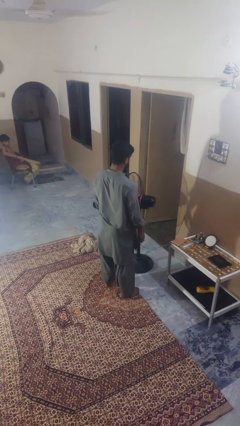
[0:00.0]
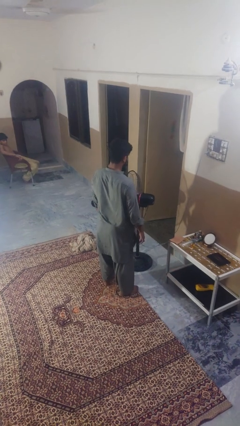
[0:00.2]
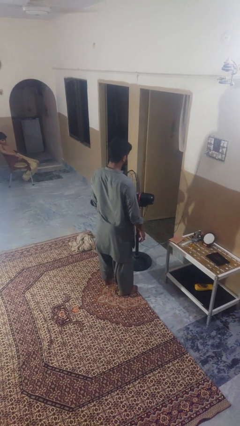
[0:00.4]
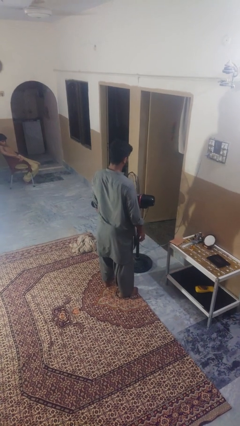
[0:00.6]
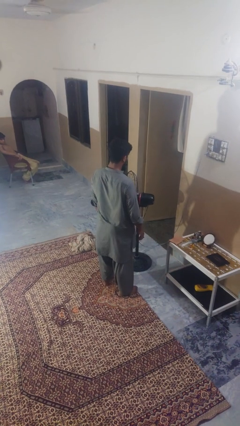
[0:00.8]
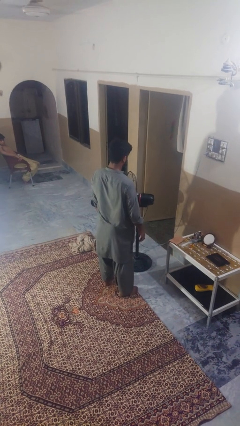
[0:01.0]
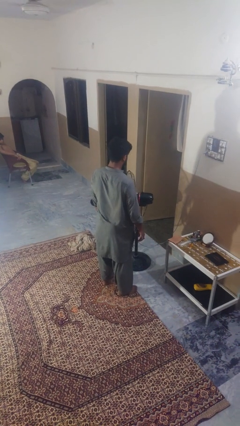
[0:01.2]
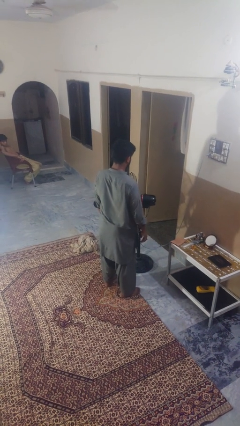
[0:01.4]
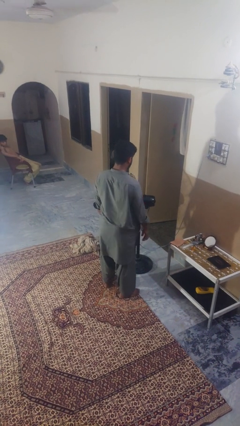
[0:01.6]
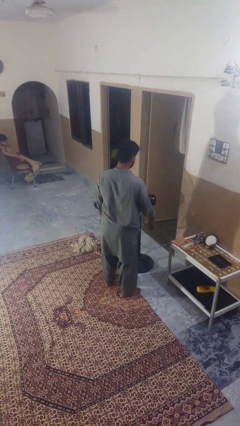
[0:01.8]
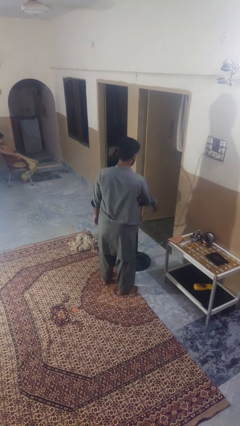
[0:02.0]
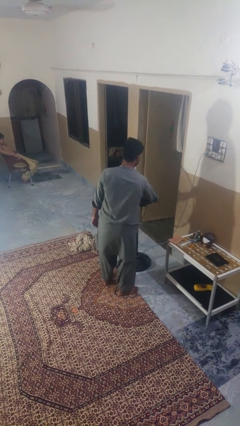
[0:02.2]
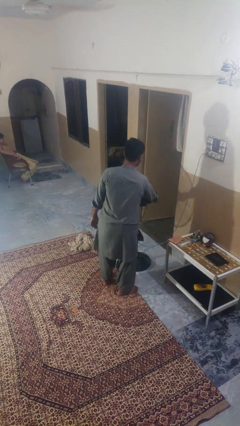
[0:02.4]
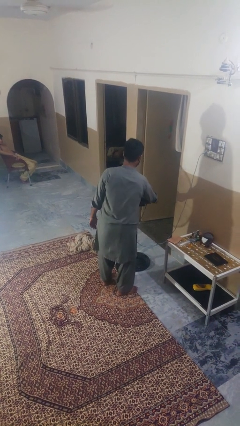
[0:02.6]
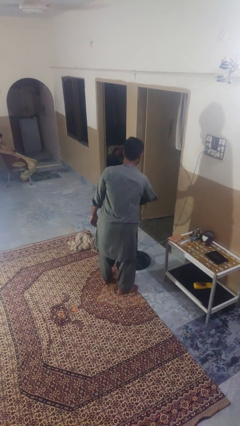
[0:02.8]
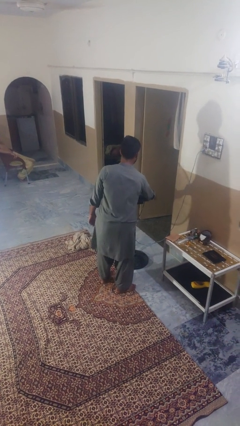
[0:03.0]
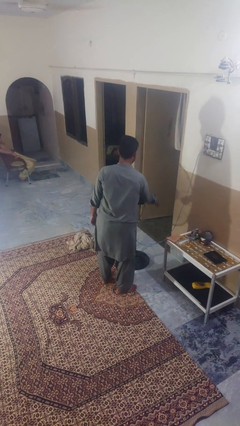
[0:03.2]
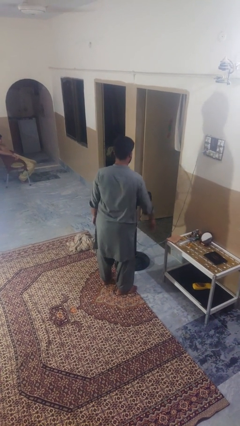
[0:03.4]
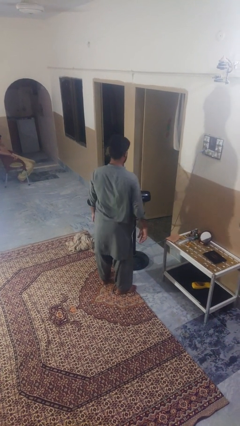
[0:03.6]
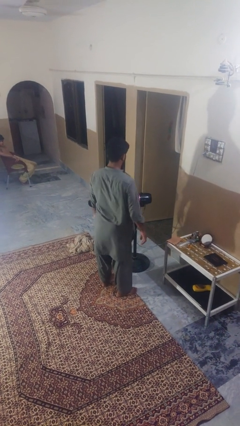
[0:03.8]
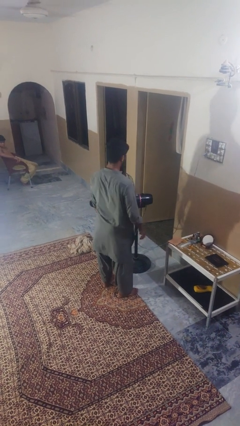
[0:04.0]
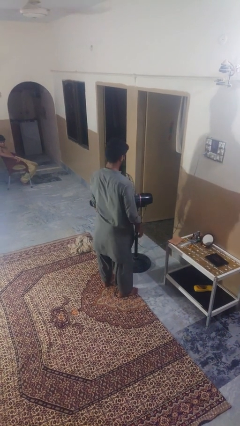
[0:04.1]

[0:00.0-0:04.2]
person turns on fan

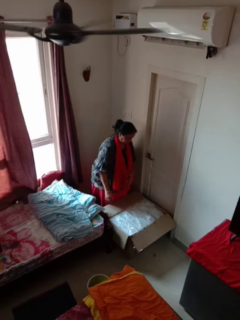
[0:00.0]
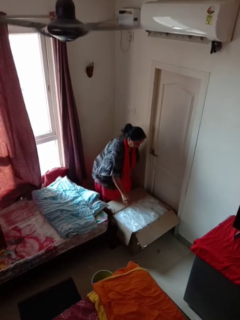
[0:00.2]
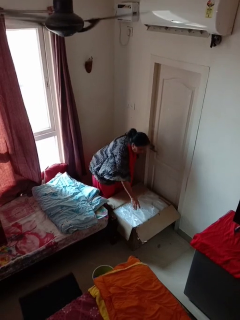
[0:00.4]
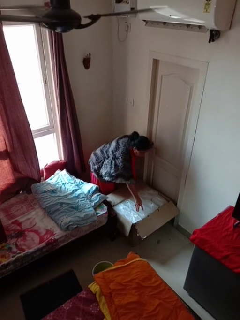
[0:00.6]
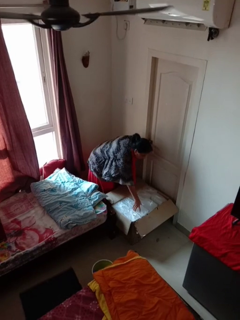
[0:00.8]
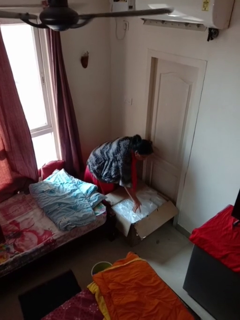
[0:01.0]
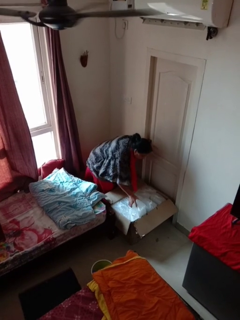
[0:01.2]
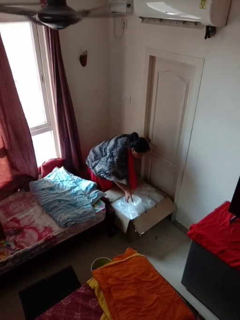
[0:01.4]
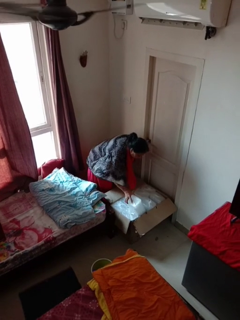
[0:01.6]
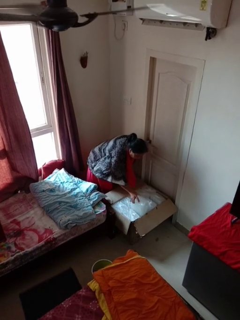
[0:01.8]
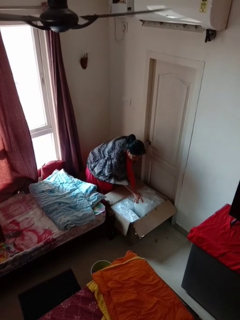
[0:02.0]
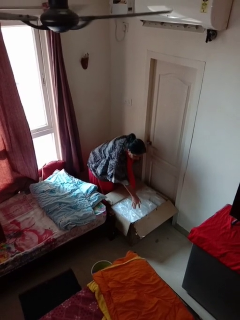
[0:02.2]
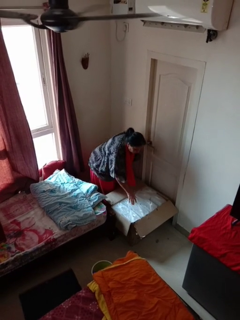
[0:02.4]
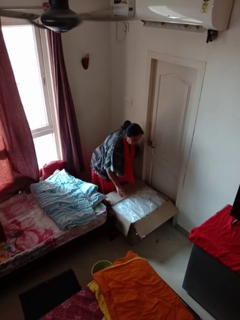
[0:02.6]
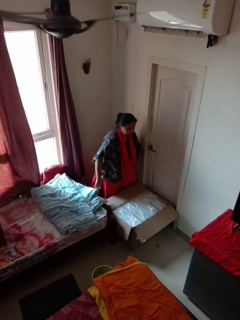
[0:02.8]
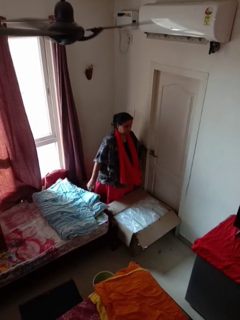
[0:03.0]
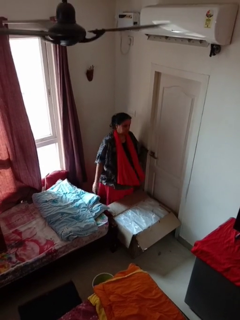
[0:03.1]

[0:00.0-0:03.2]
person searches in box

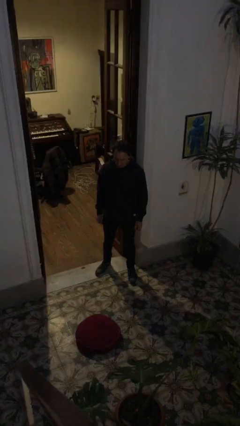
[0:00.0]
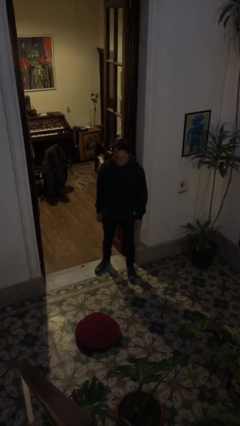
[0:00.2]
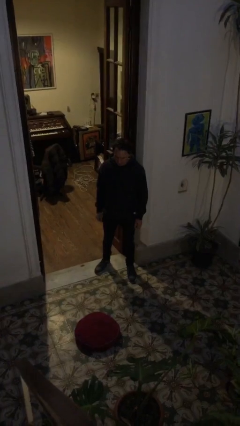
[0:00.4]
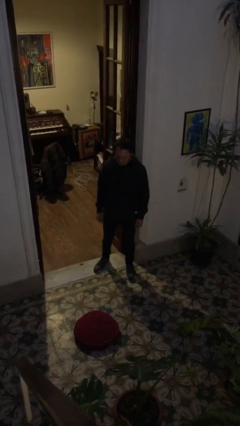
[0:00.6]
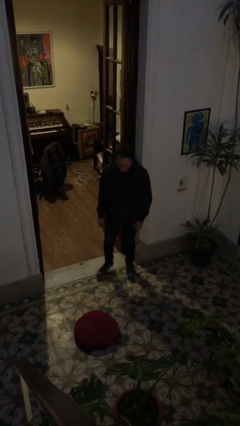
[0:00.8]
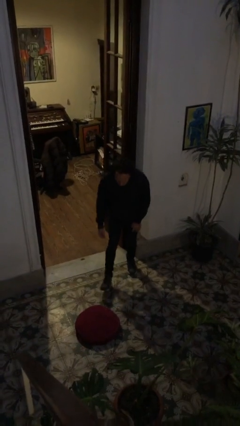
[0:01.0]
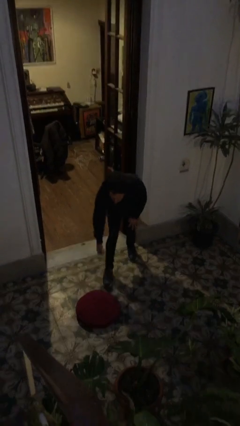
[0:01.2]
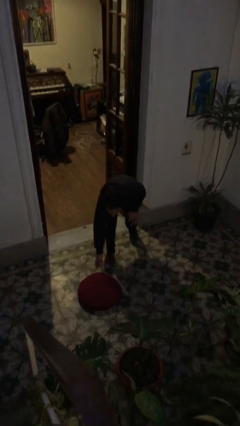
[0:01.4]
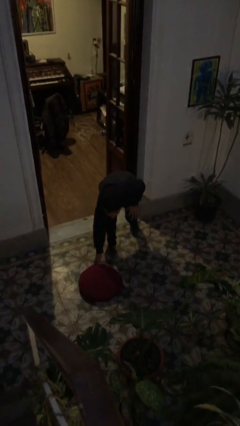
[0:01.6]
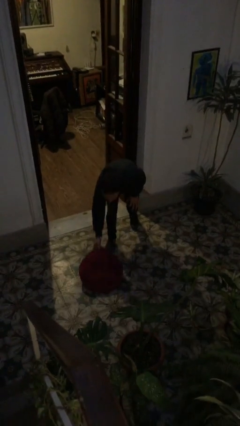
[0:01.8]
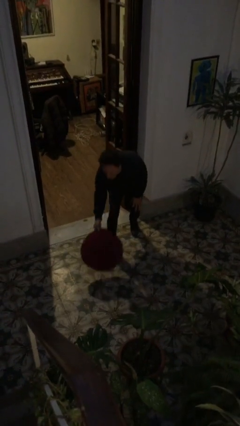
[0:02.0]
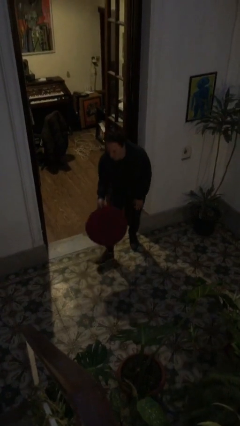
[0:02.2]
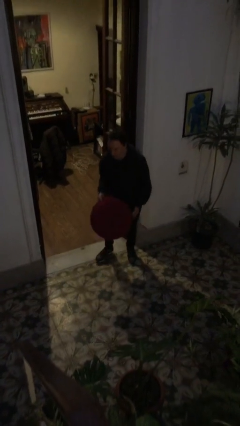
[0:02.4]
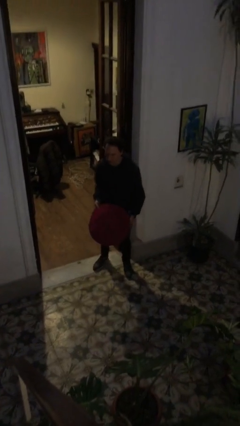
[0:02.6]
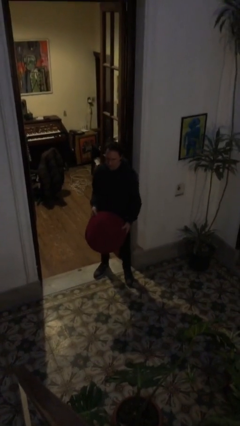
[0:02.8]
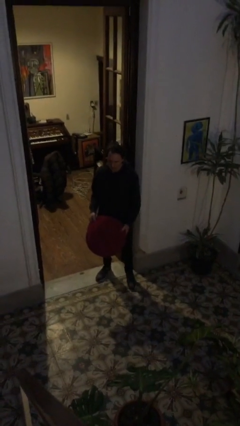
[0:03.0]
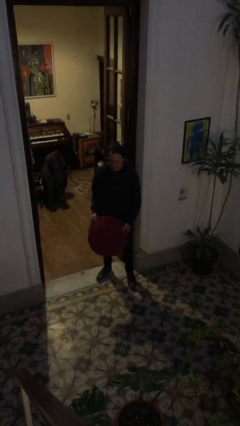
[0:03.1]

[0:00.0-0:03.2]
person picks up object from floor

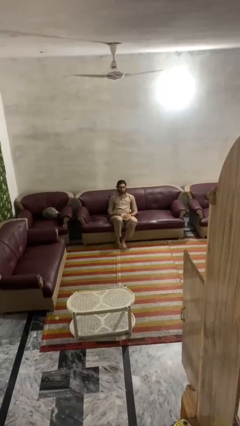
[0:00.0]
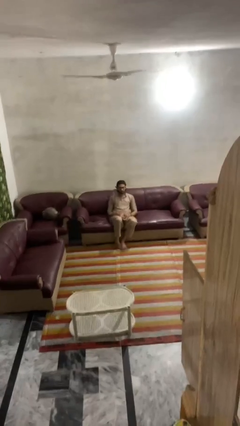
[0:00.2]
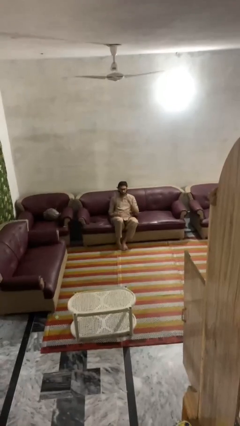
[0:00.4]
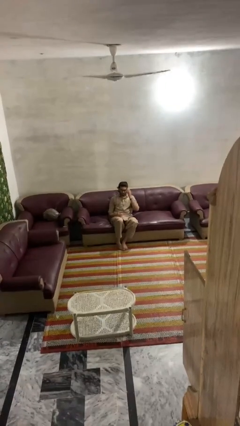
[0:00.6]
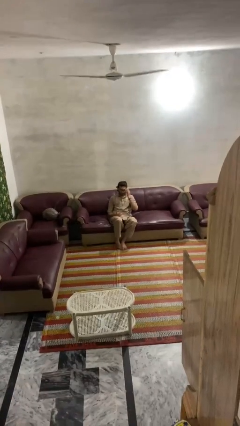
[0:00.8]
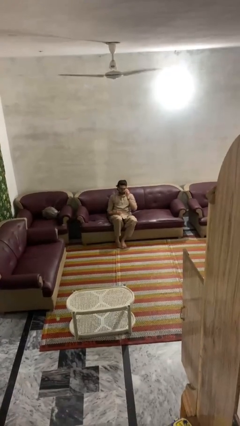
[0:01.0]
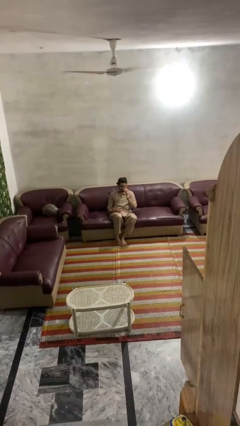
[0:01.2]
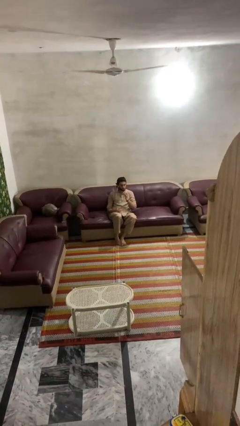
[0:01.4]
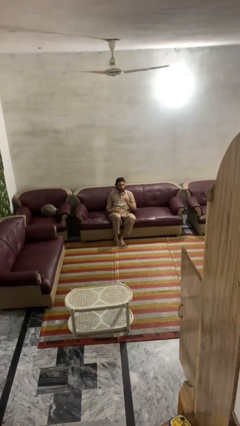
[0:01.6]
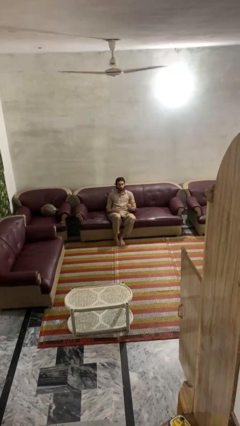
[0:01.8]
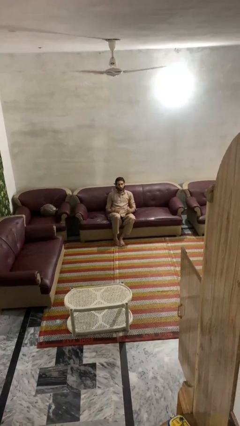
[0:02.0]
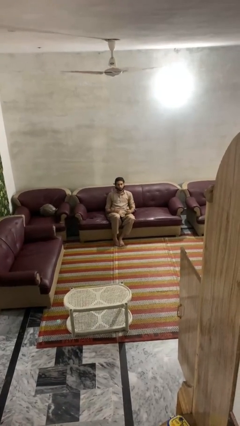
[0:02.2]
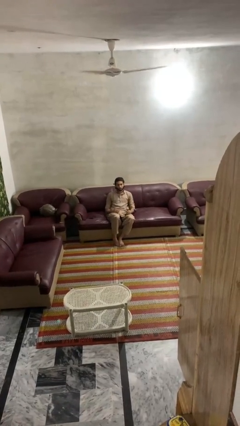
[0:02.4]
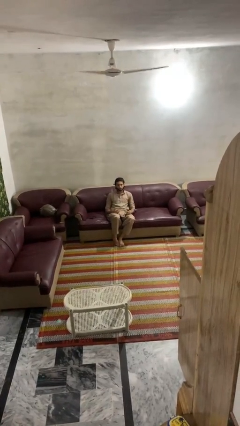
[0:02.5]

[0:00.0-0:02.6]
person takes off glasses

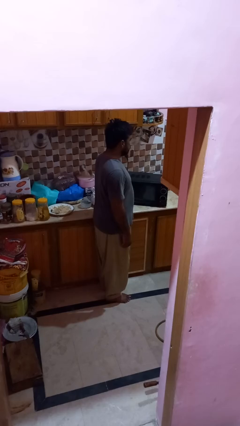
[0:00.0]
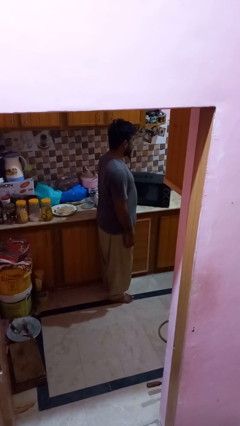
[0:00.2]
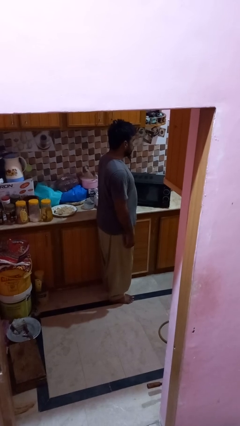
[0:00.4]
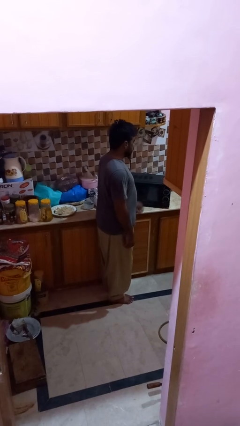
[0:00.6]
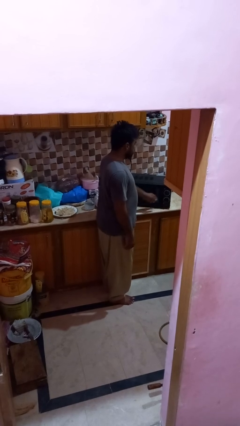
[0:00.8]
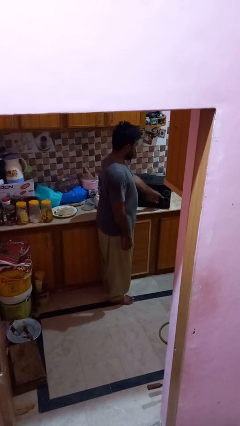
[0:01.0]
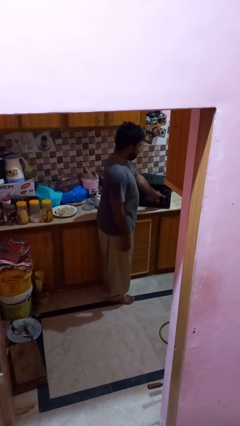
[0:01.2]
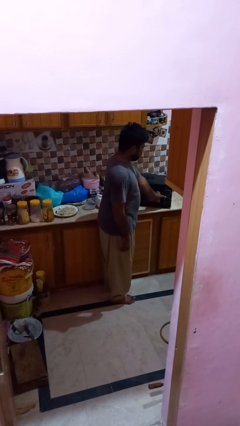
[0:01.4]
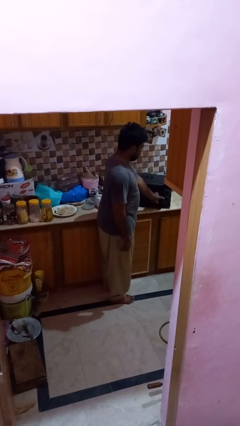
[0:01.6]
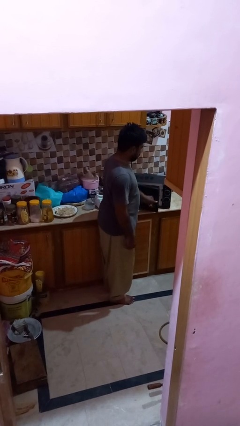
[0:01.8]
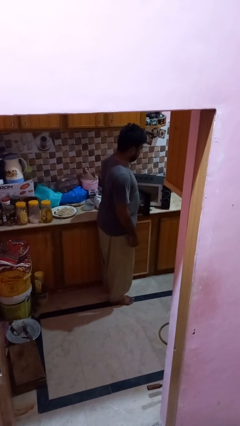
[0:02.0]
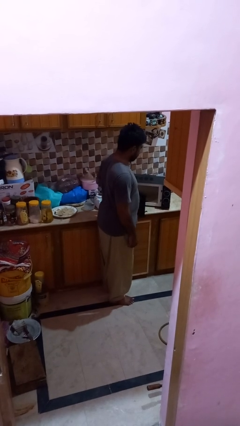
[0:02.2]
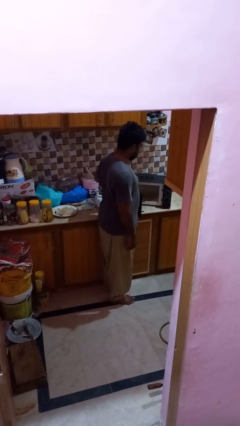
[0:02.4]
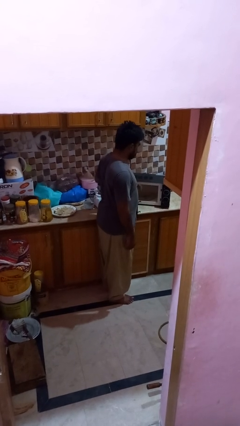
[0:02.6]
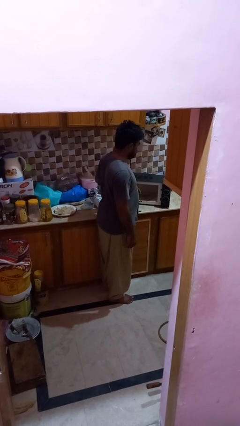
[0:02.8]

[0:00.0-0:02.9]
person opens microwave

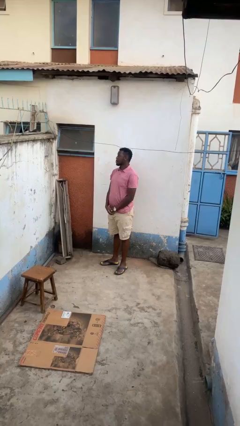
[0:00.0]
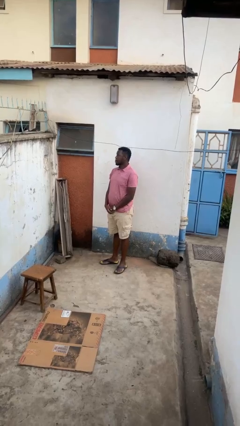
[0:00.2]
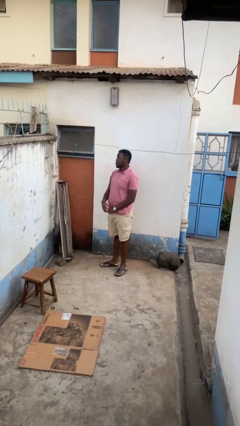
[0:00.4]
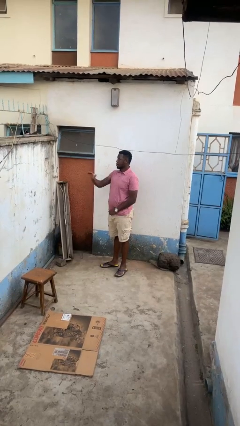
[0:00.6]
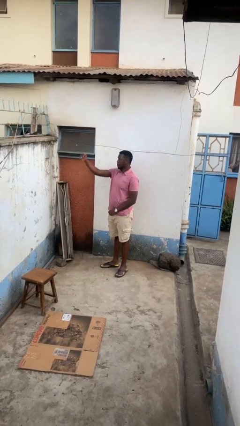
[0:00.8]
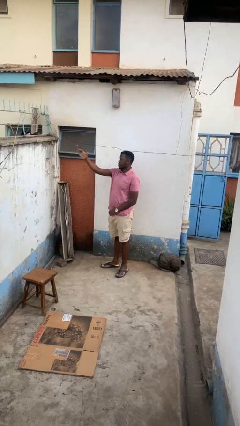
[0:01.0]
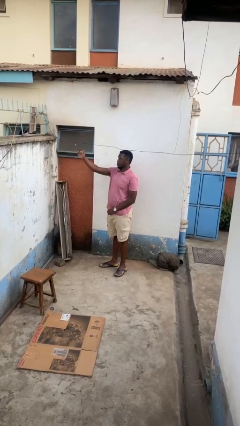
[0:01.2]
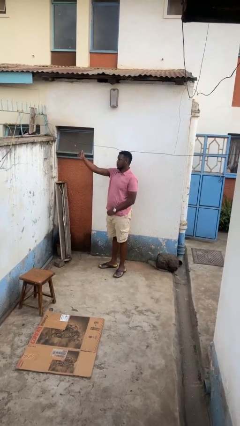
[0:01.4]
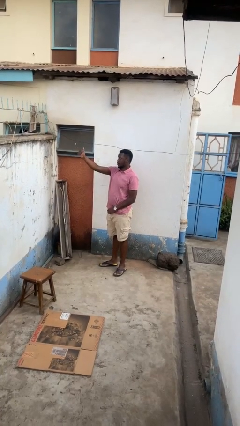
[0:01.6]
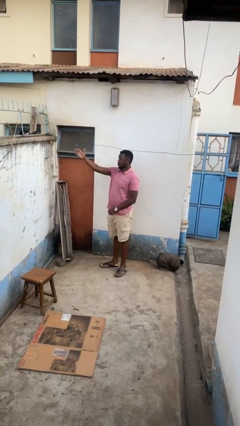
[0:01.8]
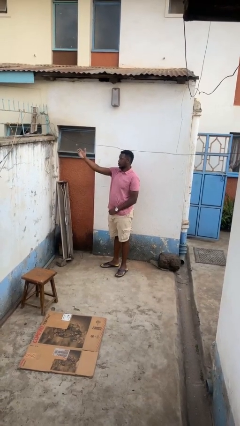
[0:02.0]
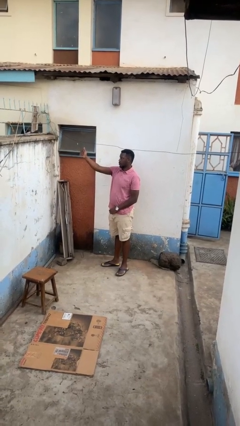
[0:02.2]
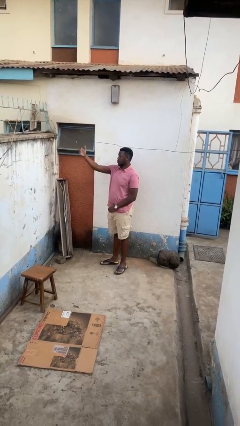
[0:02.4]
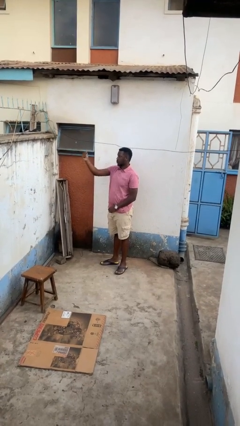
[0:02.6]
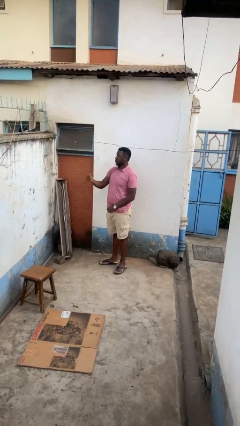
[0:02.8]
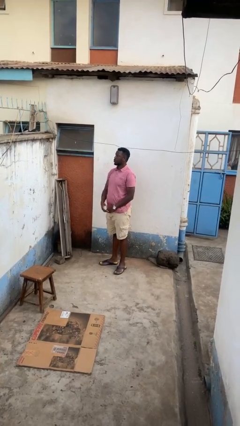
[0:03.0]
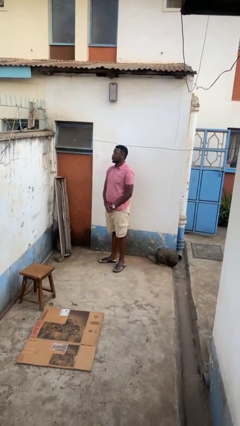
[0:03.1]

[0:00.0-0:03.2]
person gestures come here
